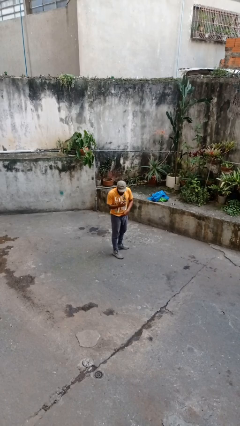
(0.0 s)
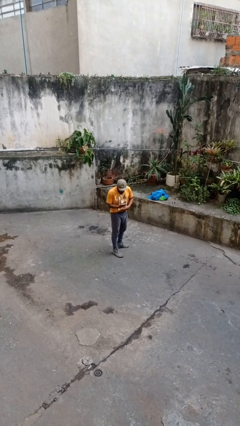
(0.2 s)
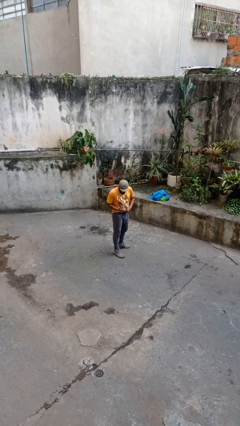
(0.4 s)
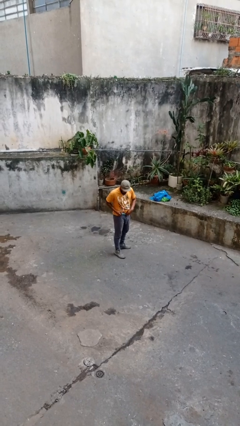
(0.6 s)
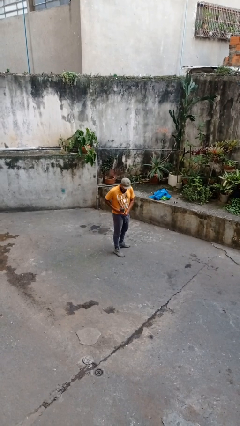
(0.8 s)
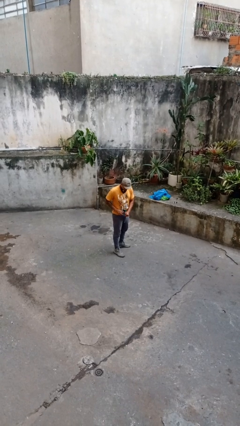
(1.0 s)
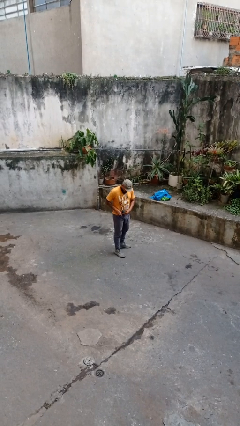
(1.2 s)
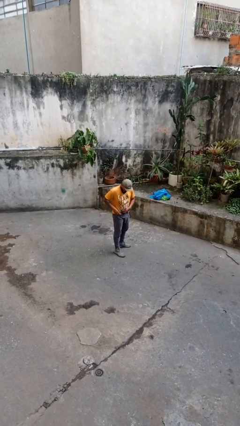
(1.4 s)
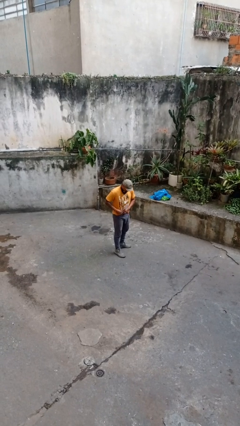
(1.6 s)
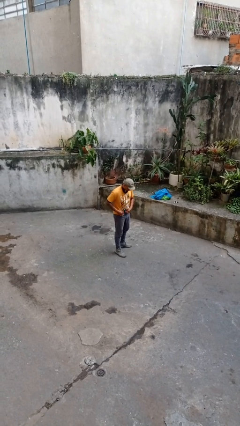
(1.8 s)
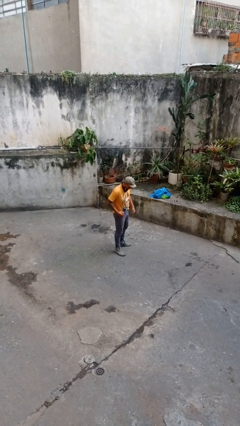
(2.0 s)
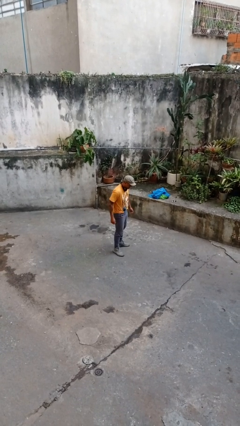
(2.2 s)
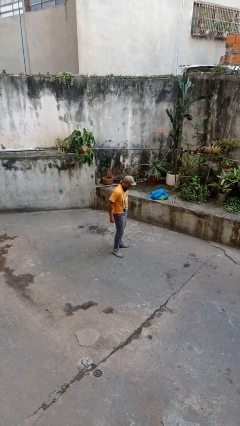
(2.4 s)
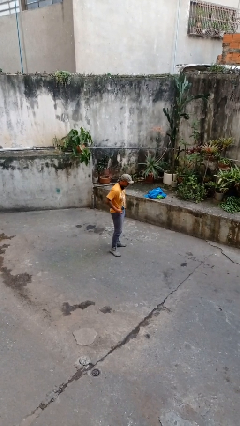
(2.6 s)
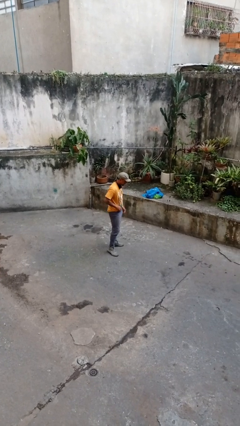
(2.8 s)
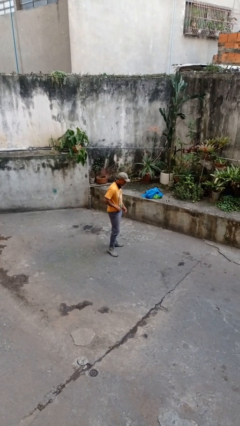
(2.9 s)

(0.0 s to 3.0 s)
person puts phone into pocket

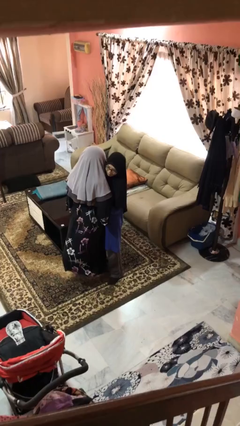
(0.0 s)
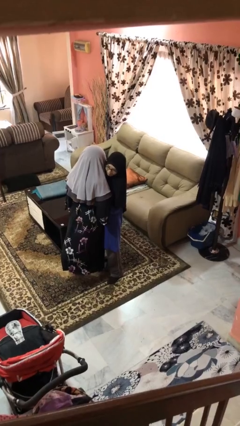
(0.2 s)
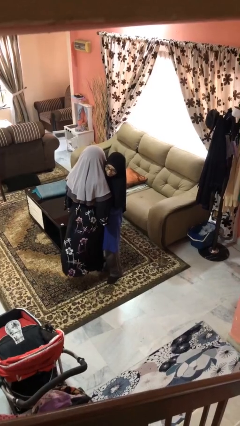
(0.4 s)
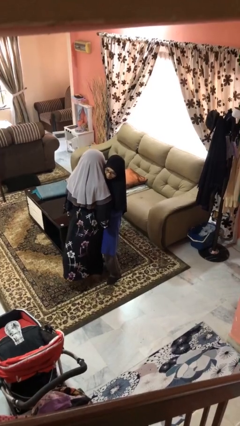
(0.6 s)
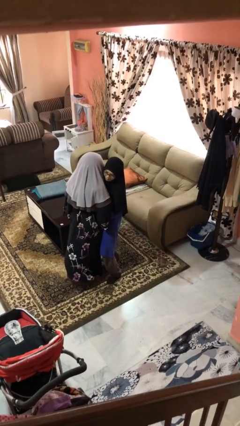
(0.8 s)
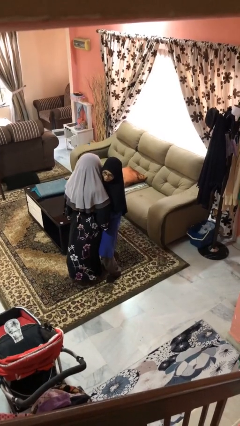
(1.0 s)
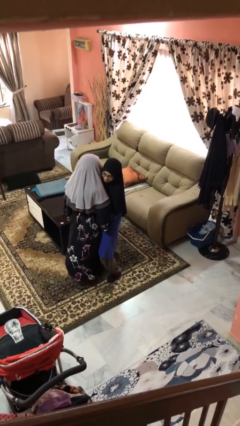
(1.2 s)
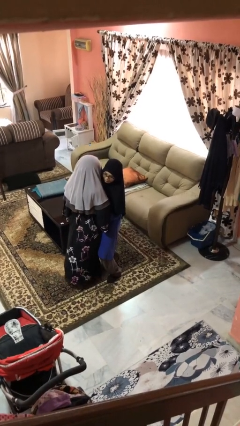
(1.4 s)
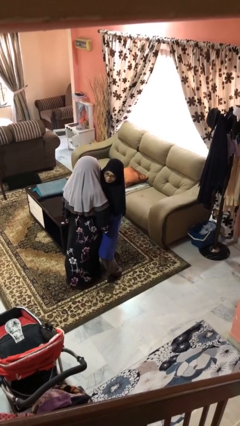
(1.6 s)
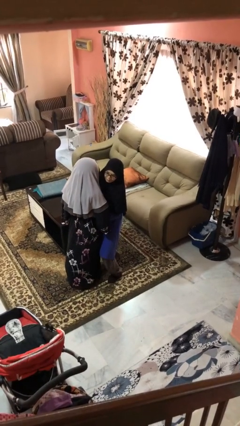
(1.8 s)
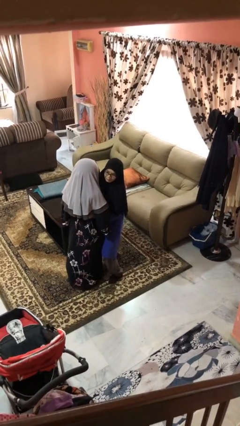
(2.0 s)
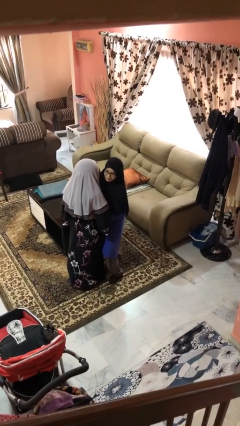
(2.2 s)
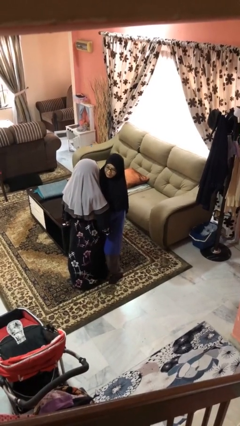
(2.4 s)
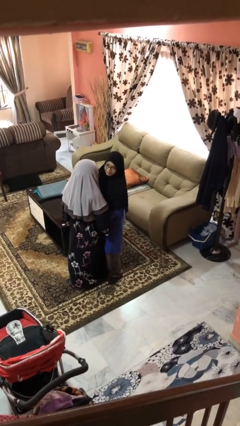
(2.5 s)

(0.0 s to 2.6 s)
person puts down person

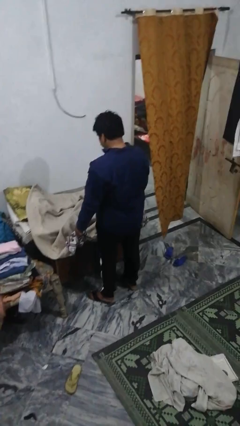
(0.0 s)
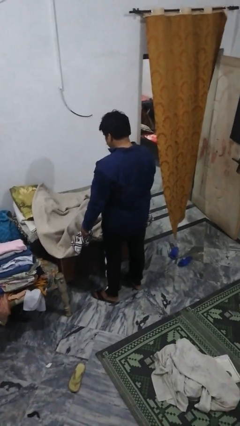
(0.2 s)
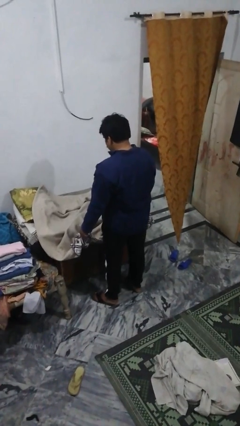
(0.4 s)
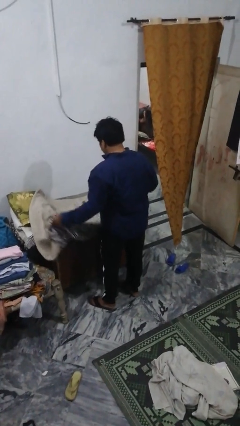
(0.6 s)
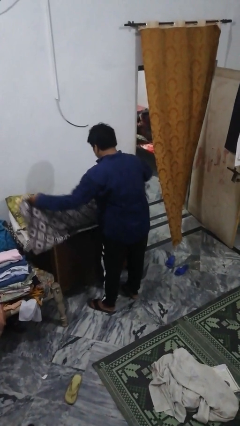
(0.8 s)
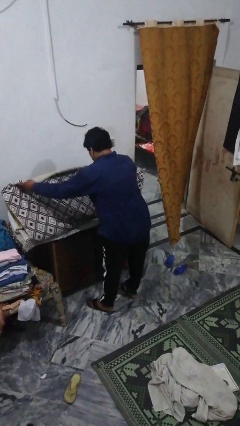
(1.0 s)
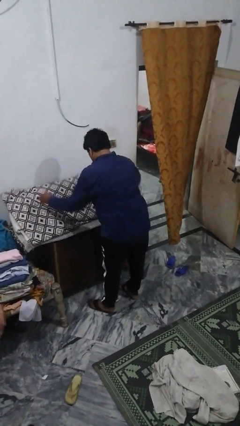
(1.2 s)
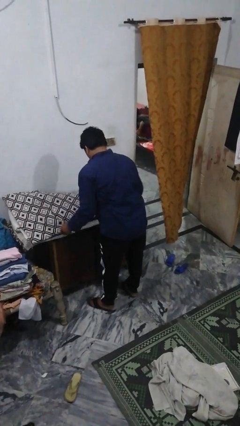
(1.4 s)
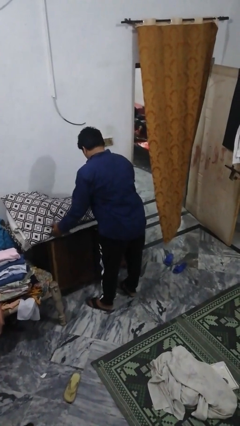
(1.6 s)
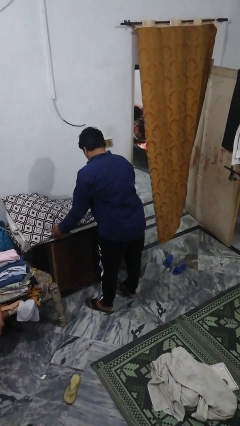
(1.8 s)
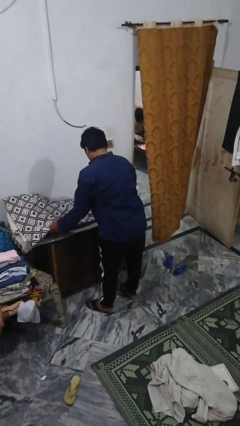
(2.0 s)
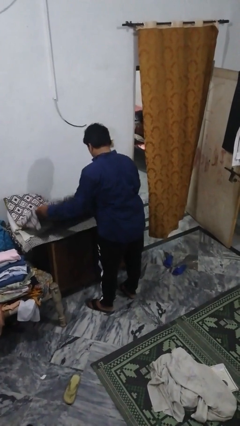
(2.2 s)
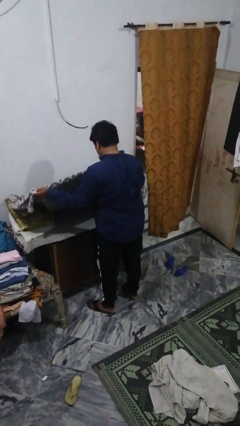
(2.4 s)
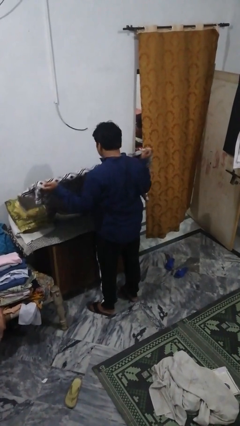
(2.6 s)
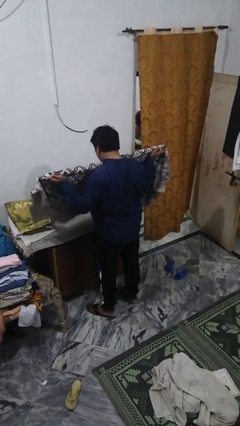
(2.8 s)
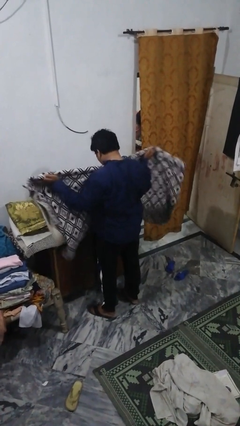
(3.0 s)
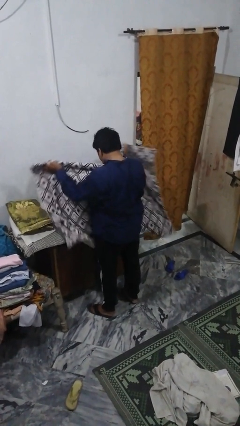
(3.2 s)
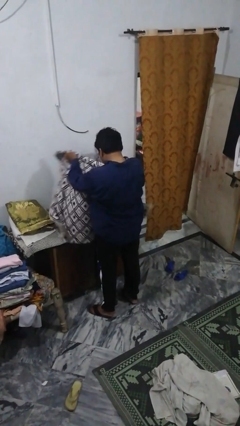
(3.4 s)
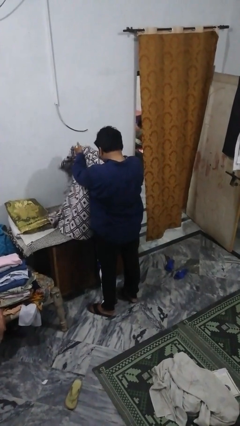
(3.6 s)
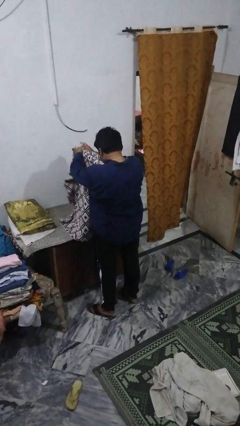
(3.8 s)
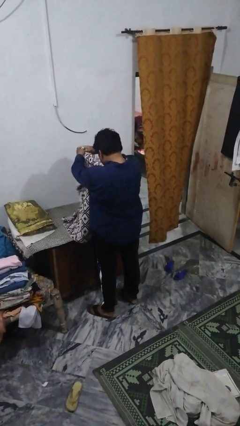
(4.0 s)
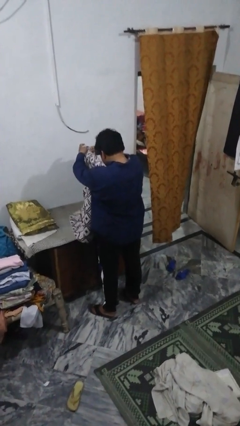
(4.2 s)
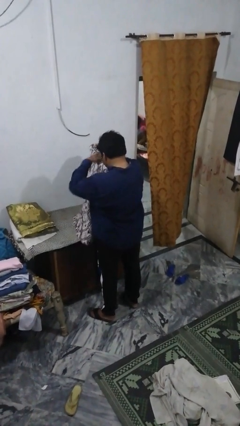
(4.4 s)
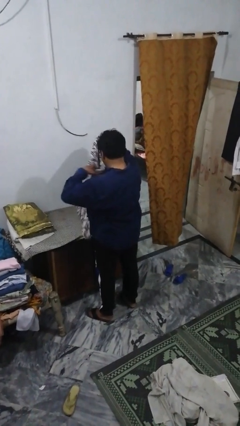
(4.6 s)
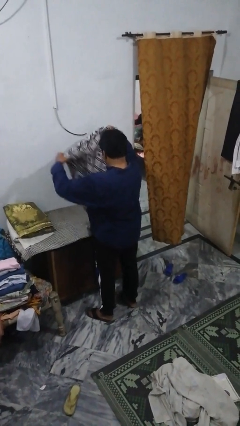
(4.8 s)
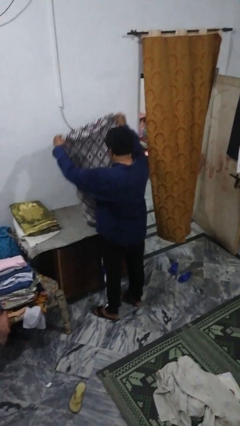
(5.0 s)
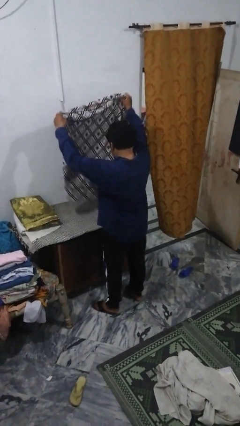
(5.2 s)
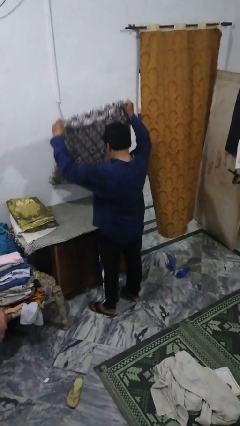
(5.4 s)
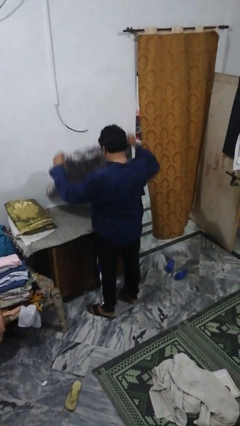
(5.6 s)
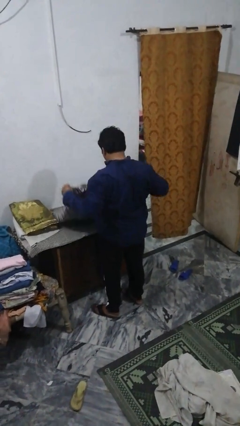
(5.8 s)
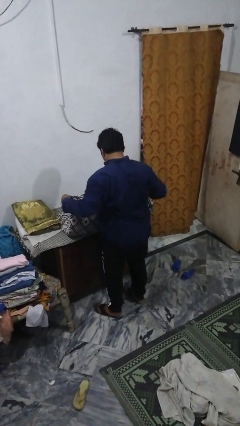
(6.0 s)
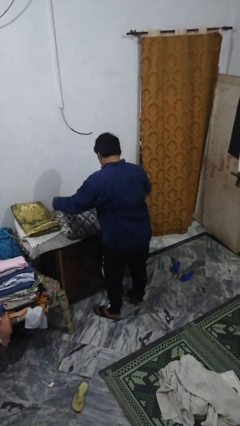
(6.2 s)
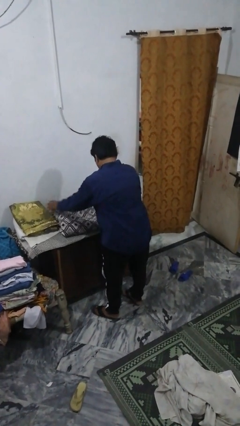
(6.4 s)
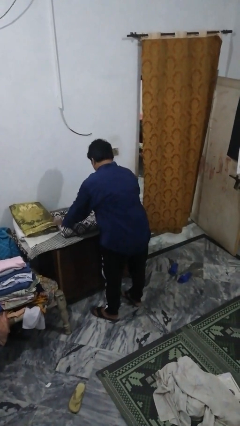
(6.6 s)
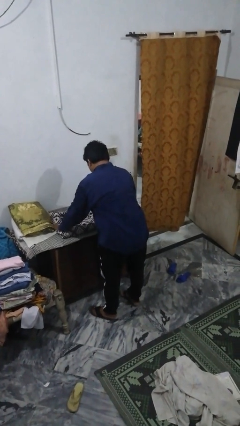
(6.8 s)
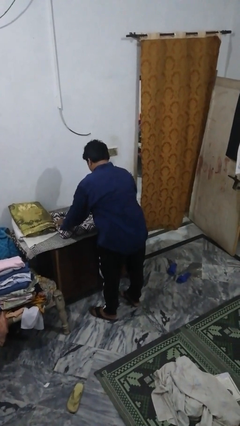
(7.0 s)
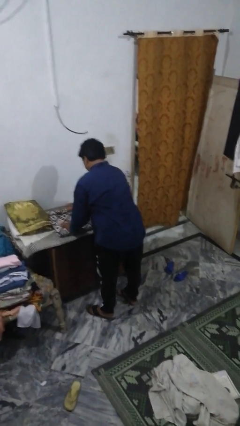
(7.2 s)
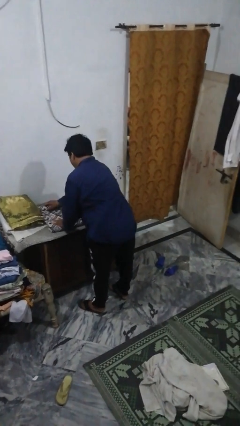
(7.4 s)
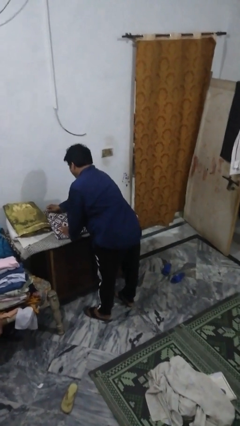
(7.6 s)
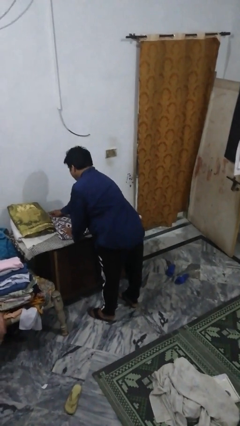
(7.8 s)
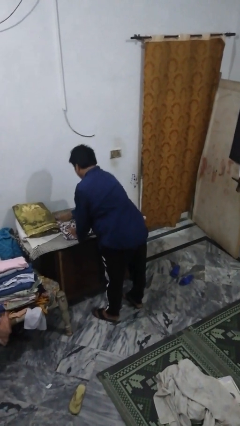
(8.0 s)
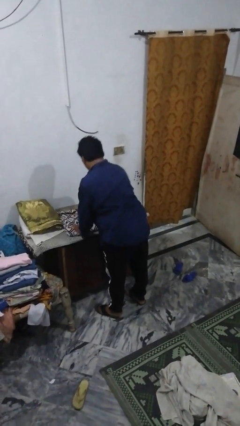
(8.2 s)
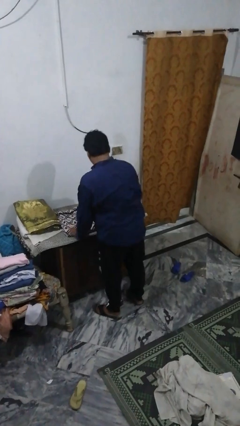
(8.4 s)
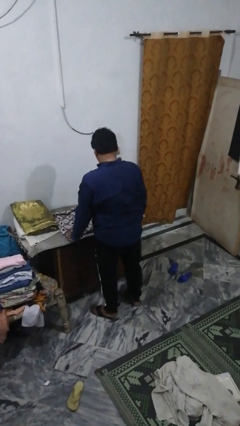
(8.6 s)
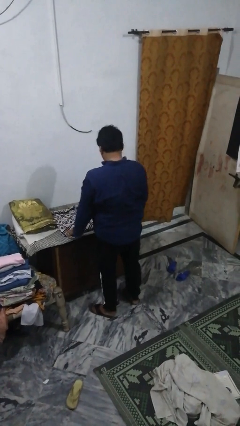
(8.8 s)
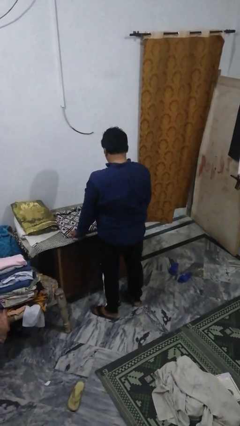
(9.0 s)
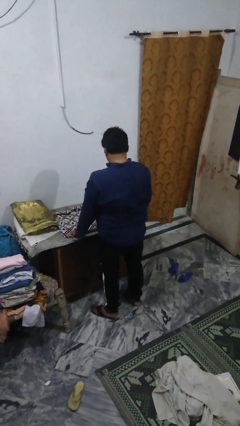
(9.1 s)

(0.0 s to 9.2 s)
person folds blanket

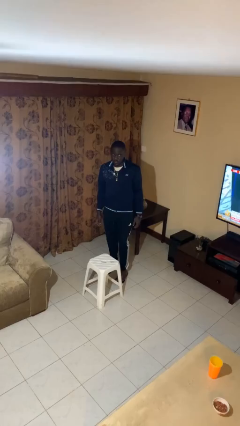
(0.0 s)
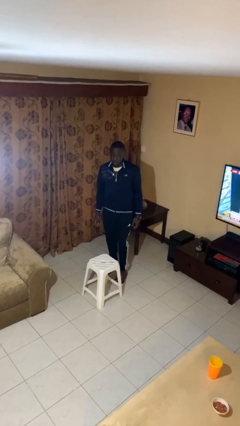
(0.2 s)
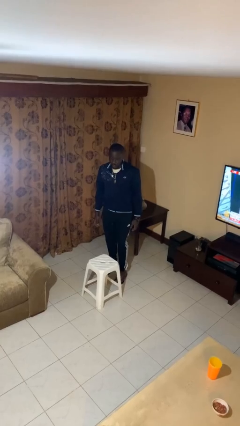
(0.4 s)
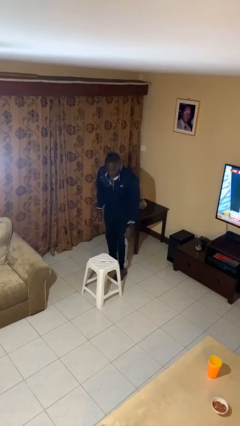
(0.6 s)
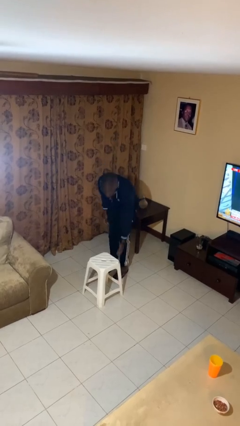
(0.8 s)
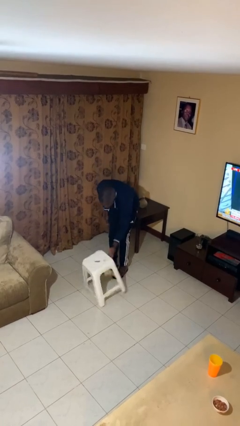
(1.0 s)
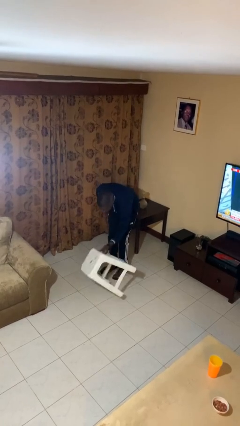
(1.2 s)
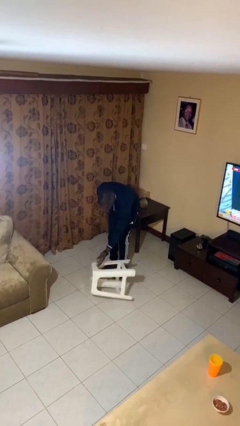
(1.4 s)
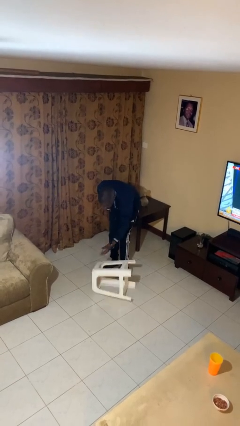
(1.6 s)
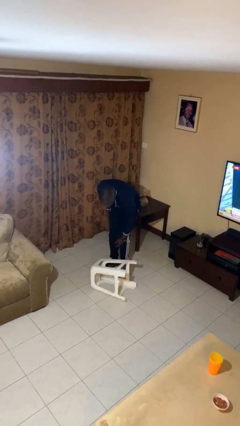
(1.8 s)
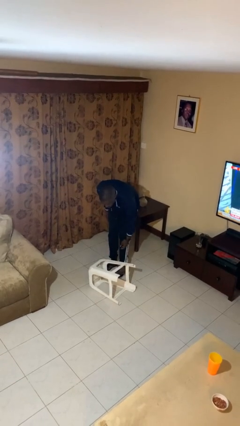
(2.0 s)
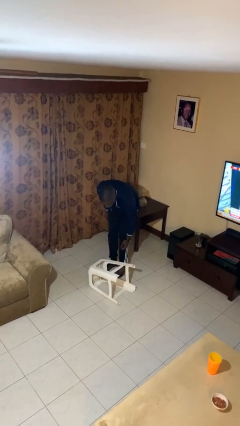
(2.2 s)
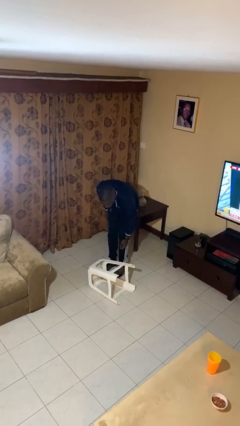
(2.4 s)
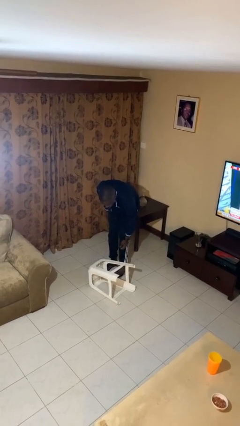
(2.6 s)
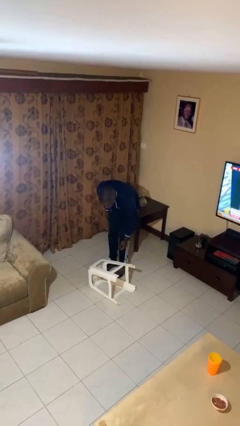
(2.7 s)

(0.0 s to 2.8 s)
person knocks over furniture

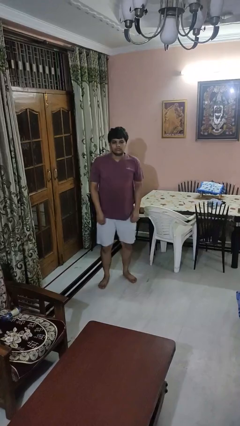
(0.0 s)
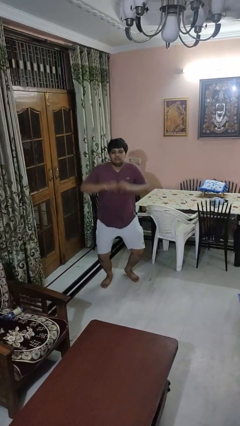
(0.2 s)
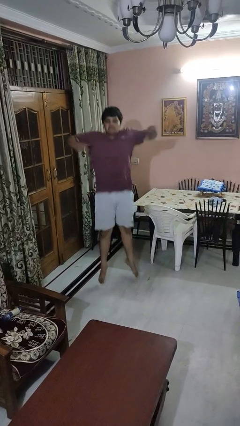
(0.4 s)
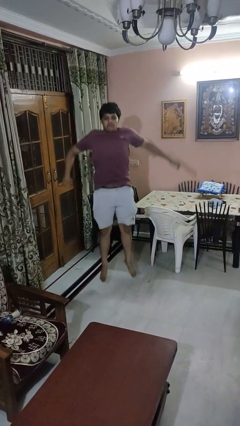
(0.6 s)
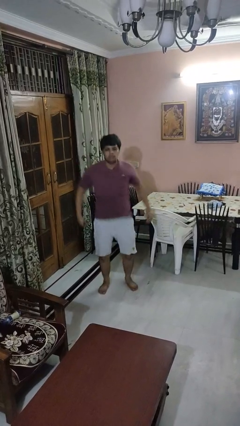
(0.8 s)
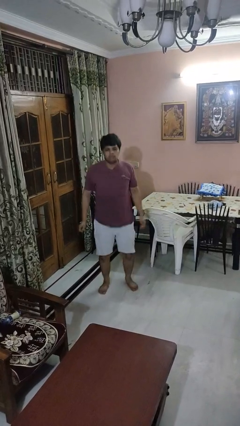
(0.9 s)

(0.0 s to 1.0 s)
person jumps
